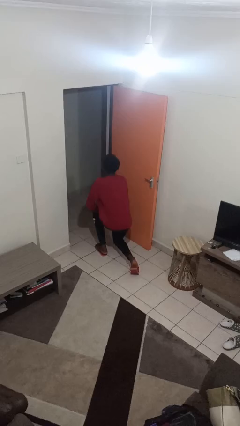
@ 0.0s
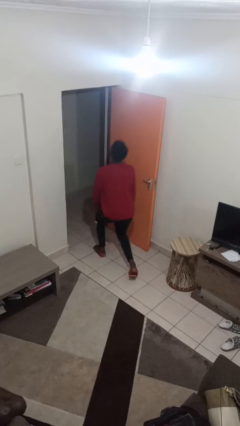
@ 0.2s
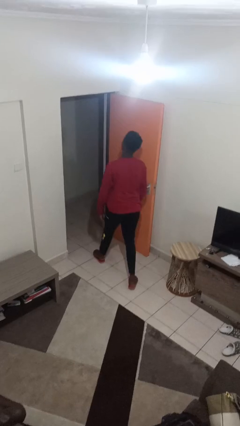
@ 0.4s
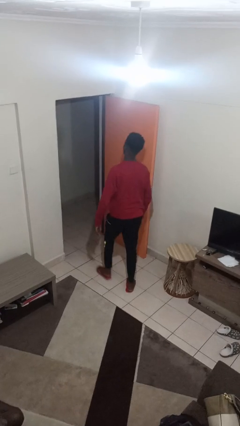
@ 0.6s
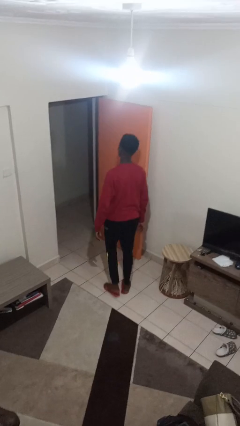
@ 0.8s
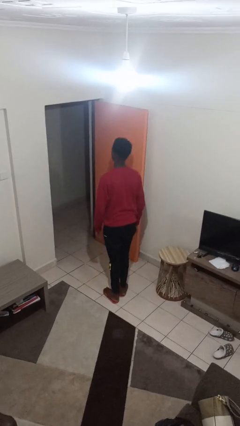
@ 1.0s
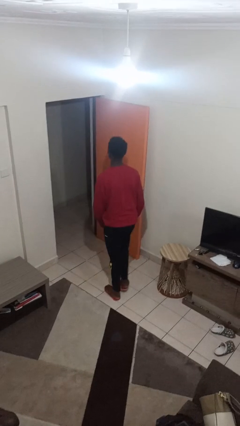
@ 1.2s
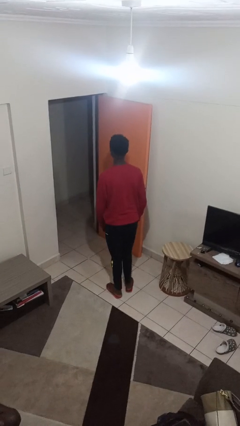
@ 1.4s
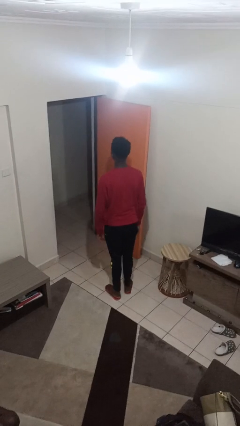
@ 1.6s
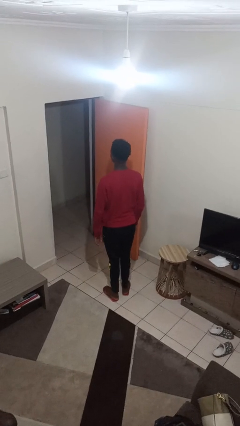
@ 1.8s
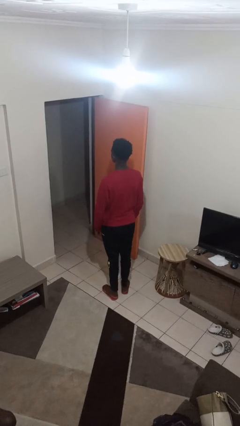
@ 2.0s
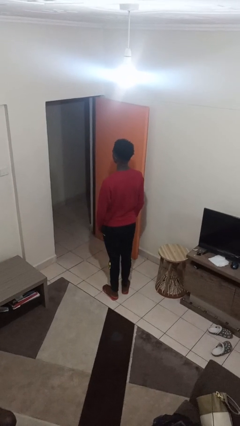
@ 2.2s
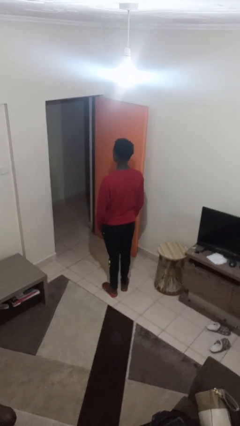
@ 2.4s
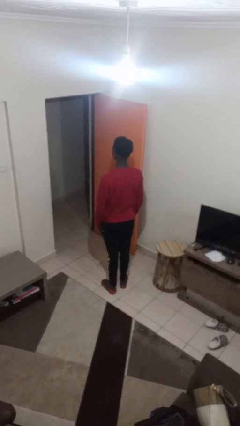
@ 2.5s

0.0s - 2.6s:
person stands up from floor

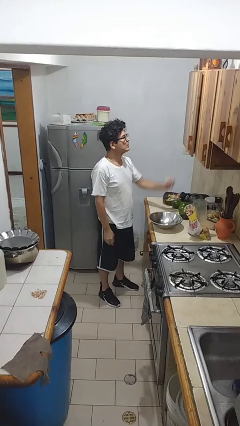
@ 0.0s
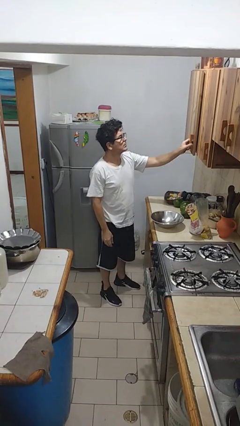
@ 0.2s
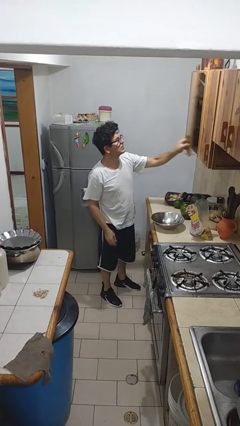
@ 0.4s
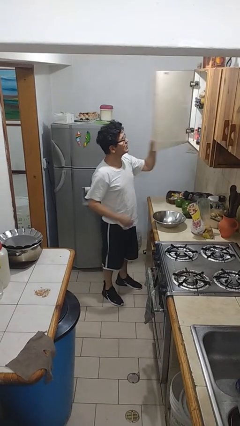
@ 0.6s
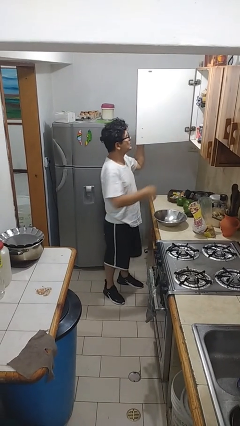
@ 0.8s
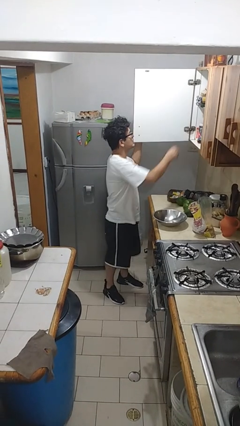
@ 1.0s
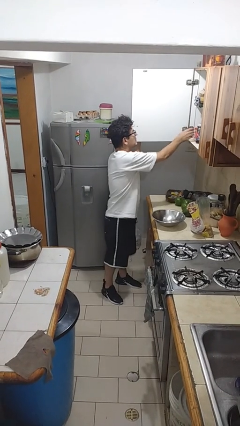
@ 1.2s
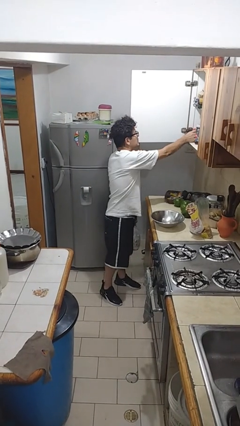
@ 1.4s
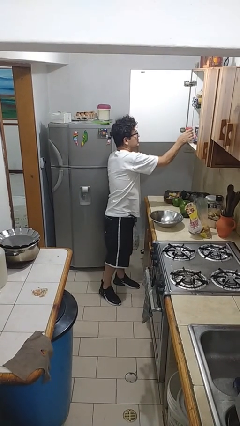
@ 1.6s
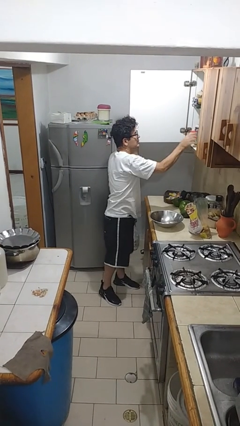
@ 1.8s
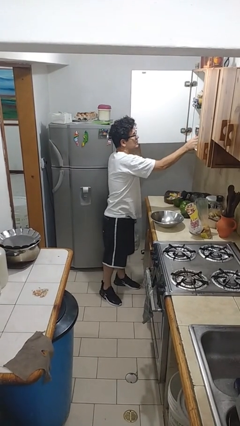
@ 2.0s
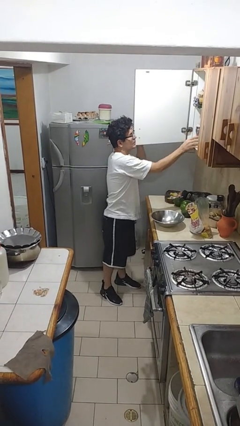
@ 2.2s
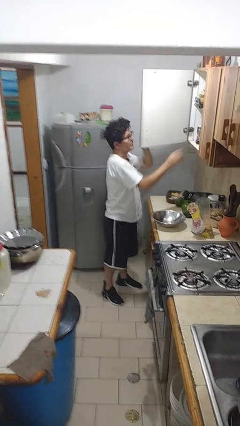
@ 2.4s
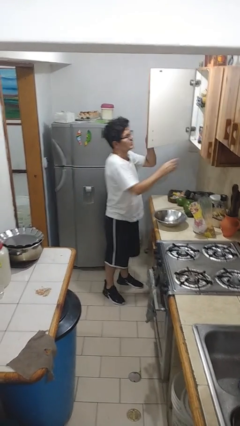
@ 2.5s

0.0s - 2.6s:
person searches in kitchen drawer

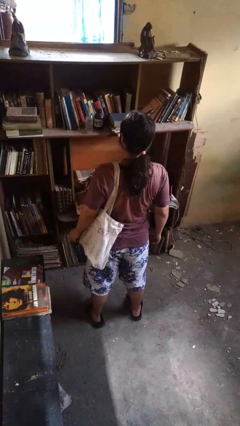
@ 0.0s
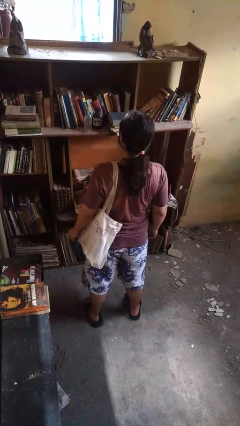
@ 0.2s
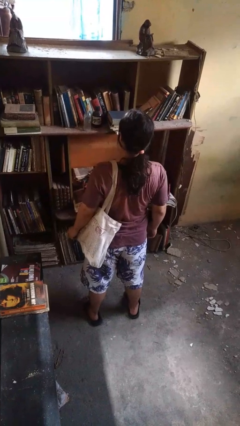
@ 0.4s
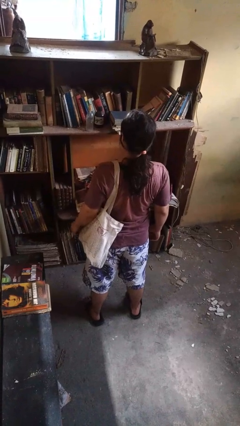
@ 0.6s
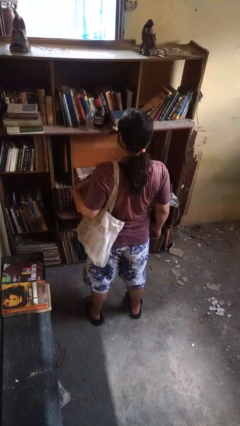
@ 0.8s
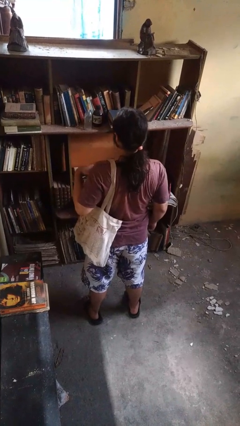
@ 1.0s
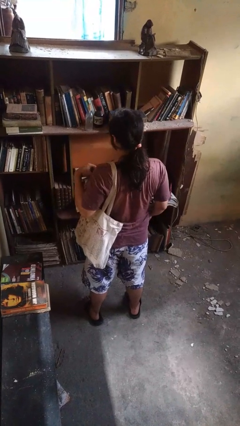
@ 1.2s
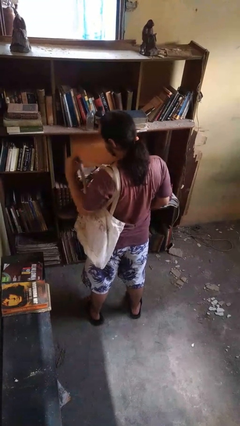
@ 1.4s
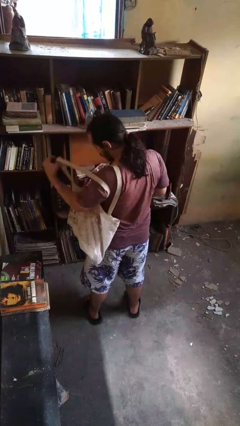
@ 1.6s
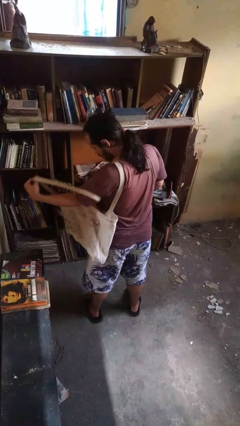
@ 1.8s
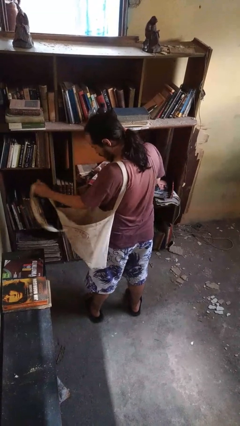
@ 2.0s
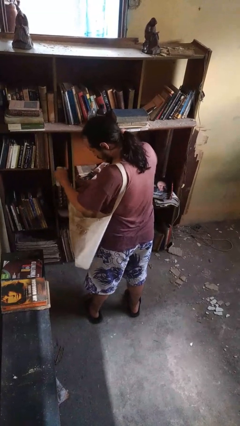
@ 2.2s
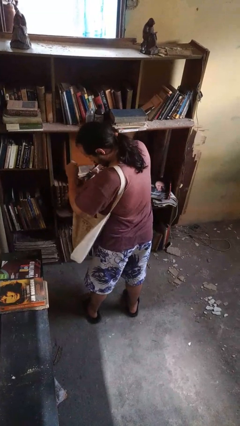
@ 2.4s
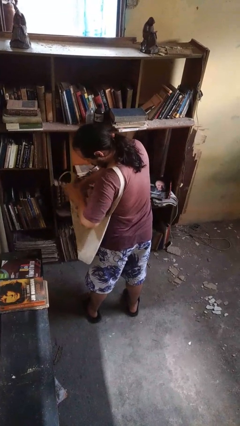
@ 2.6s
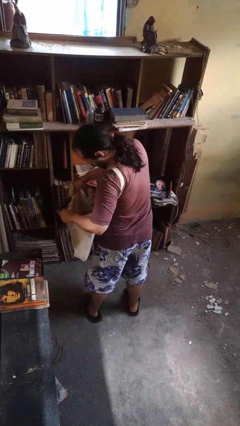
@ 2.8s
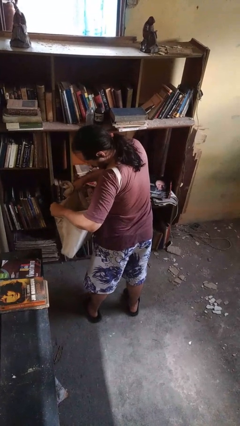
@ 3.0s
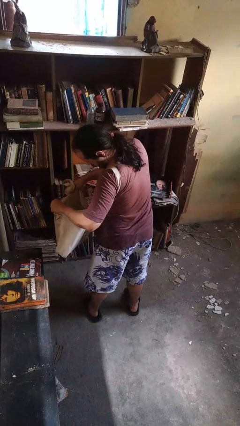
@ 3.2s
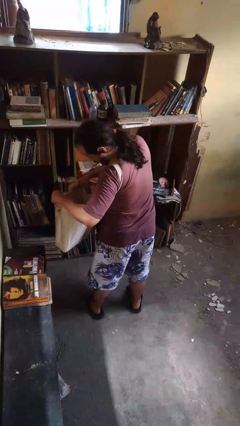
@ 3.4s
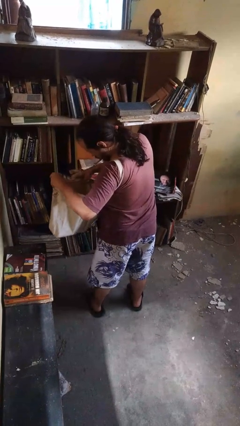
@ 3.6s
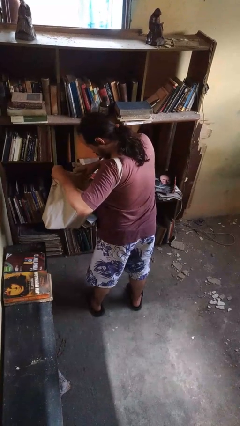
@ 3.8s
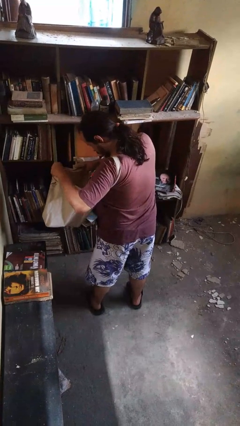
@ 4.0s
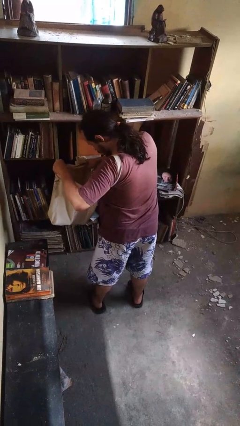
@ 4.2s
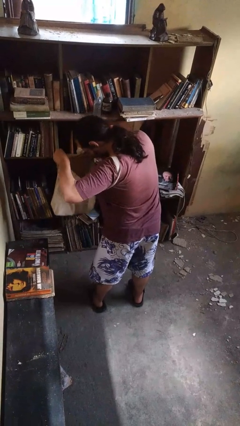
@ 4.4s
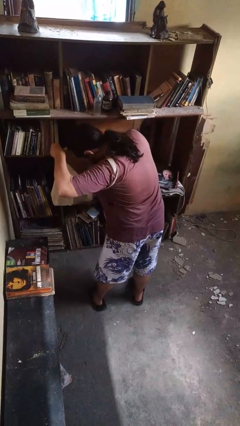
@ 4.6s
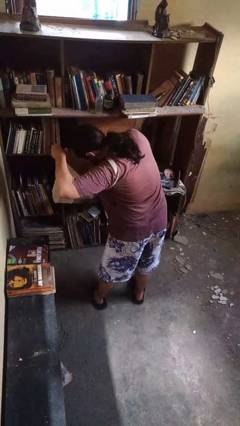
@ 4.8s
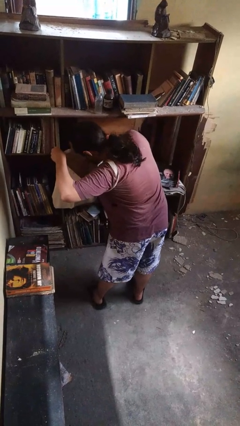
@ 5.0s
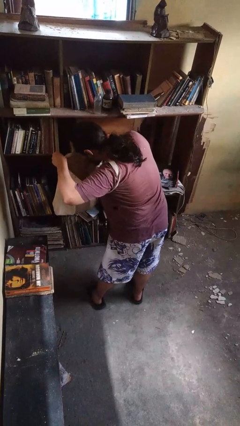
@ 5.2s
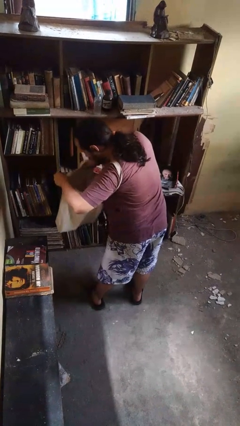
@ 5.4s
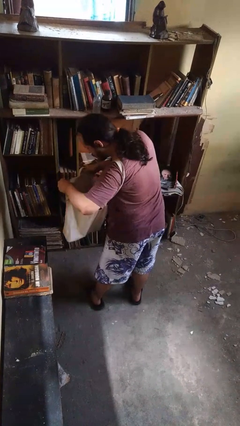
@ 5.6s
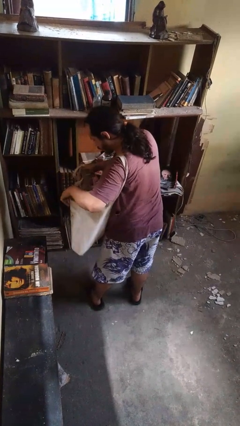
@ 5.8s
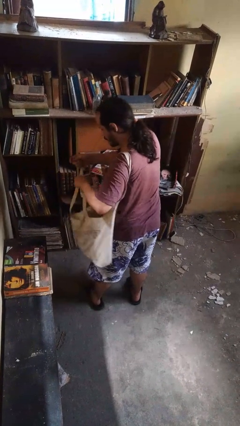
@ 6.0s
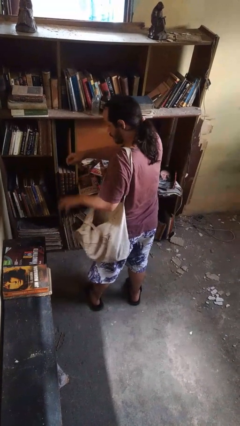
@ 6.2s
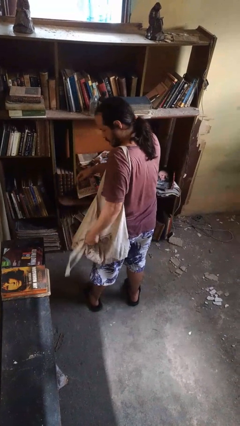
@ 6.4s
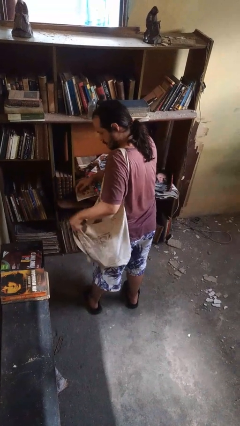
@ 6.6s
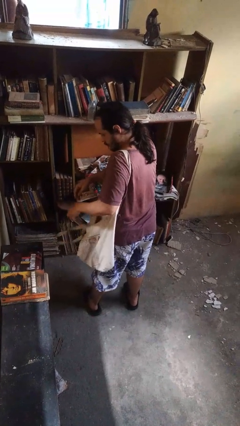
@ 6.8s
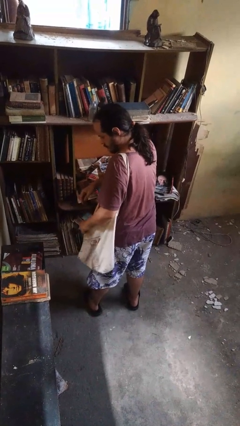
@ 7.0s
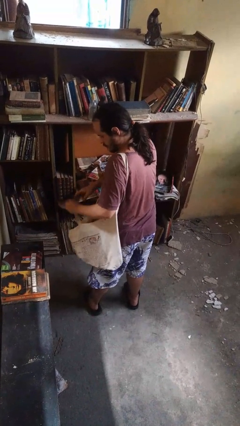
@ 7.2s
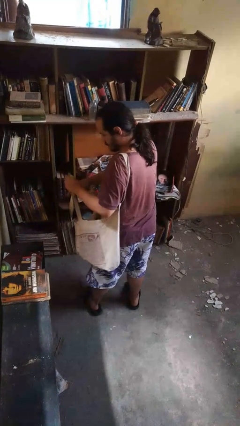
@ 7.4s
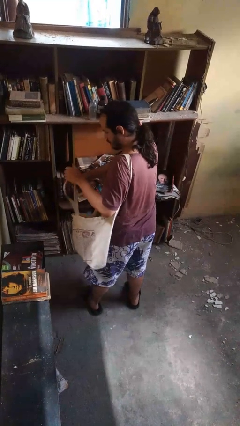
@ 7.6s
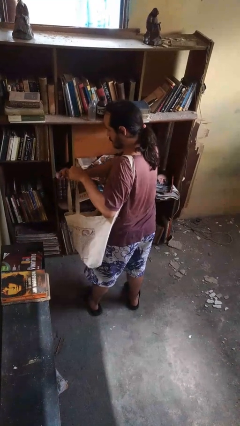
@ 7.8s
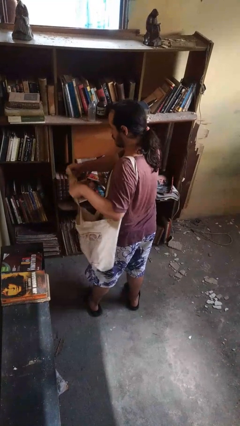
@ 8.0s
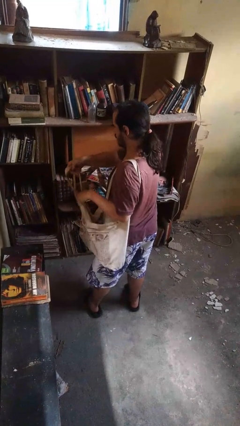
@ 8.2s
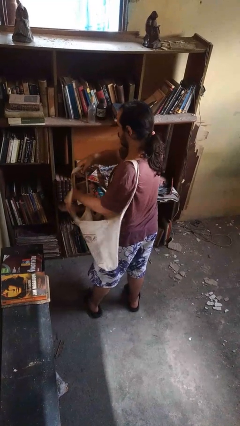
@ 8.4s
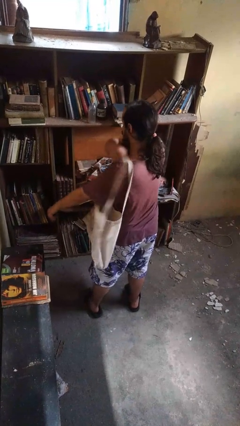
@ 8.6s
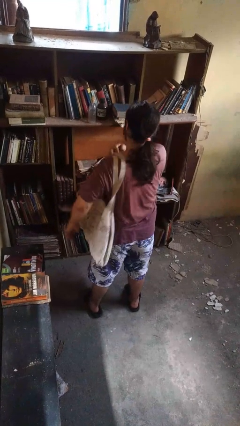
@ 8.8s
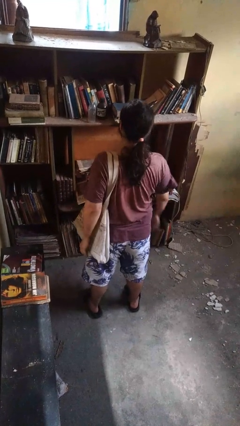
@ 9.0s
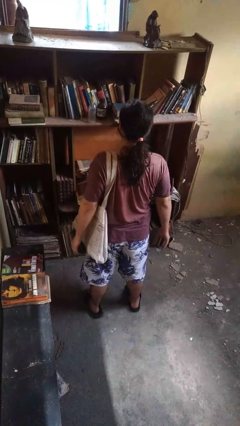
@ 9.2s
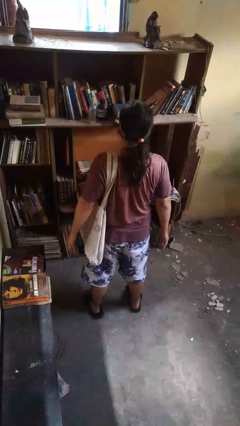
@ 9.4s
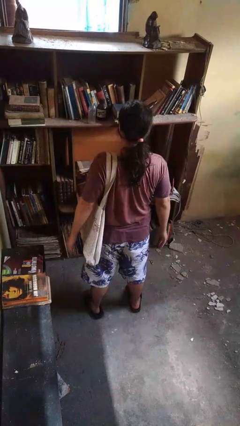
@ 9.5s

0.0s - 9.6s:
person searches in bag

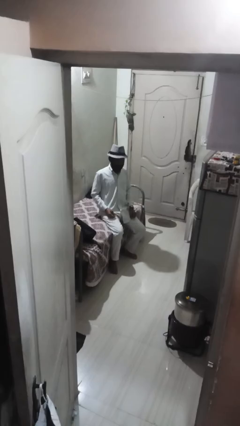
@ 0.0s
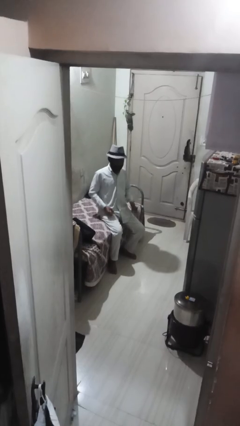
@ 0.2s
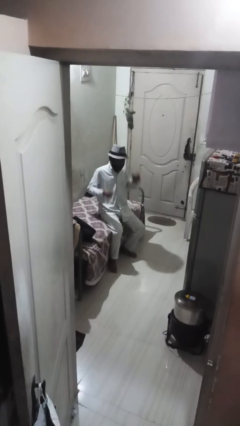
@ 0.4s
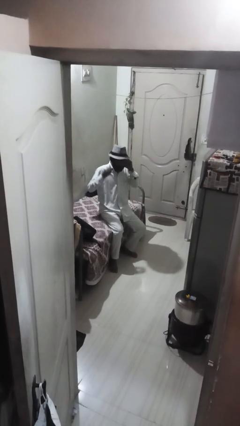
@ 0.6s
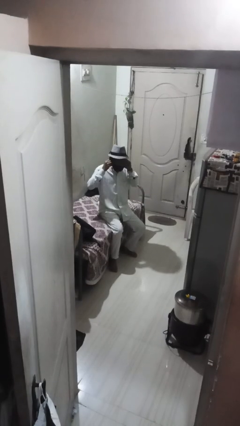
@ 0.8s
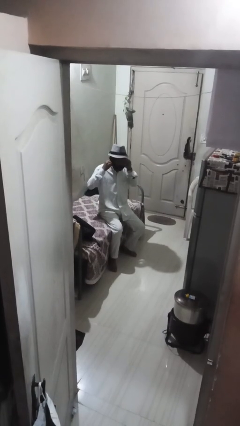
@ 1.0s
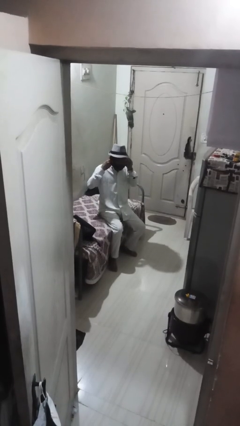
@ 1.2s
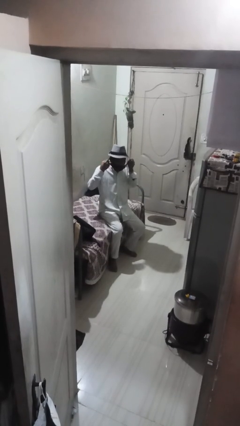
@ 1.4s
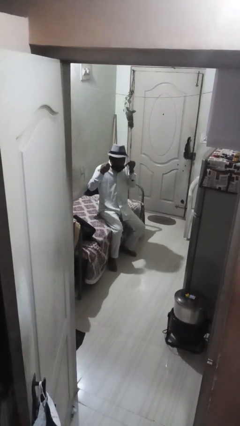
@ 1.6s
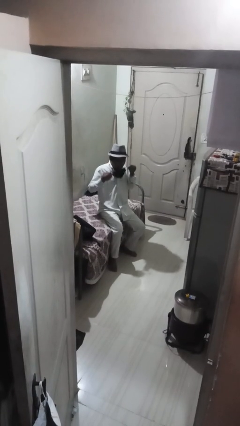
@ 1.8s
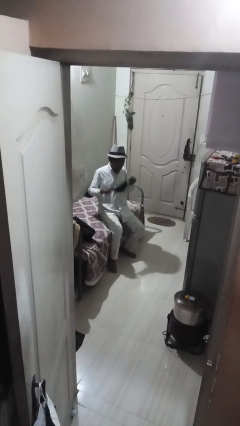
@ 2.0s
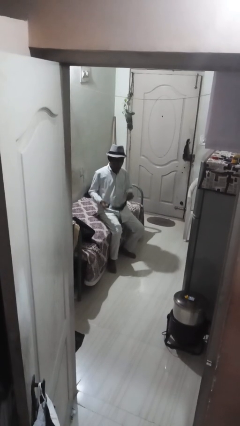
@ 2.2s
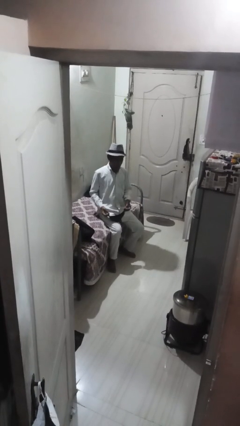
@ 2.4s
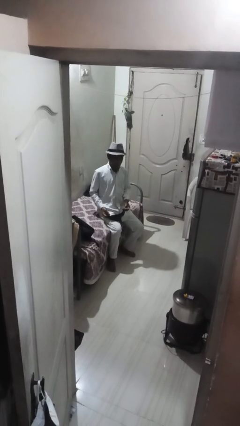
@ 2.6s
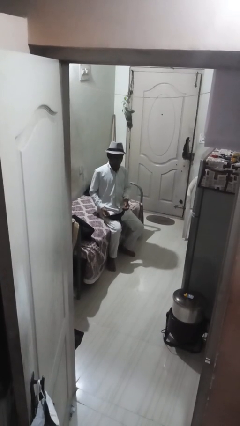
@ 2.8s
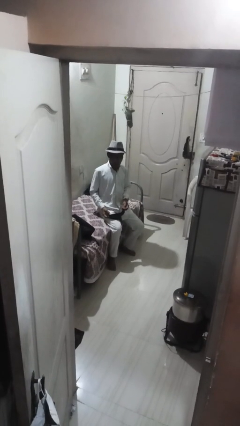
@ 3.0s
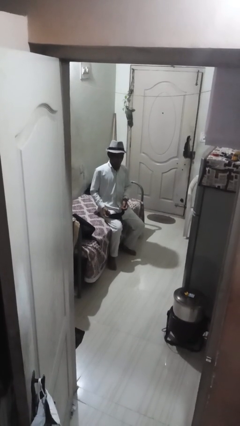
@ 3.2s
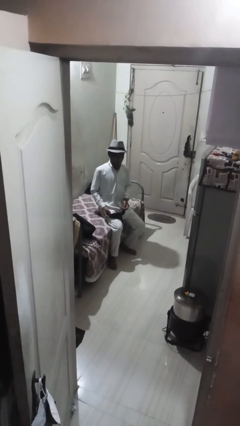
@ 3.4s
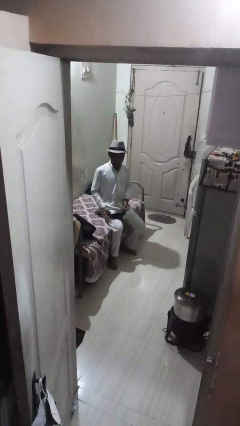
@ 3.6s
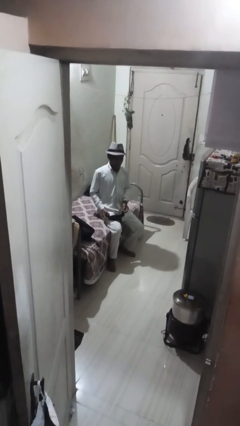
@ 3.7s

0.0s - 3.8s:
person takes off facemask
